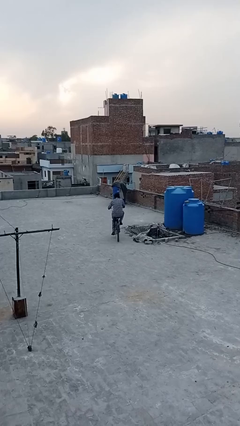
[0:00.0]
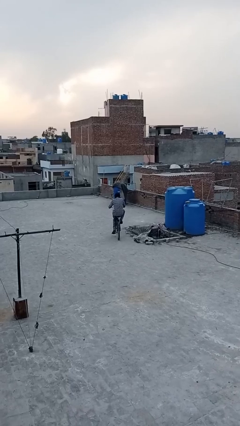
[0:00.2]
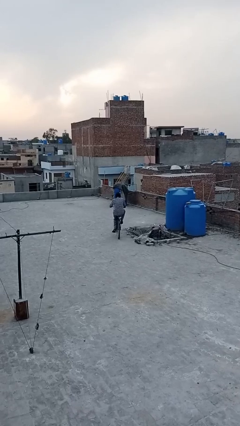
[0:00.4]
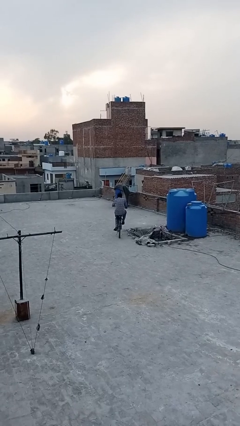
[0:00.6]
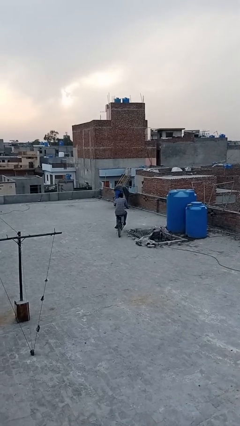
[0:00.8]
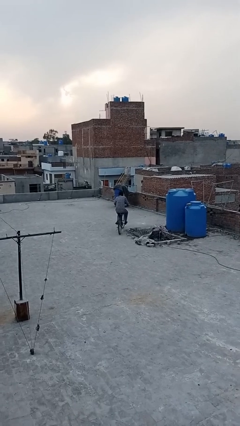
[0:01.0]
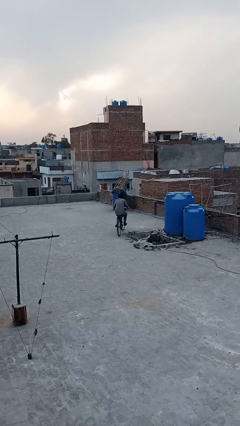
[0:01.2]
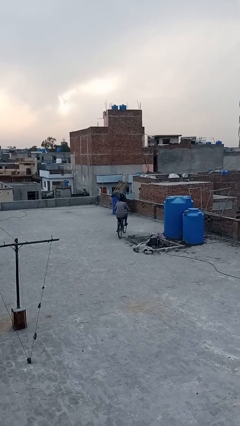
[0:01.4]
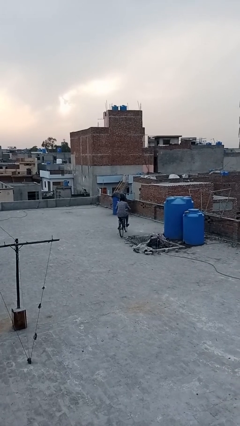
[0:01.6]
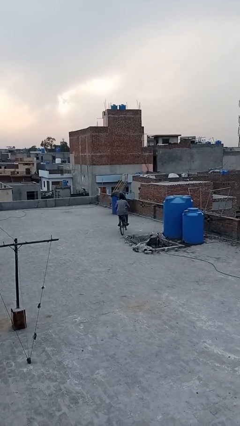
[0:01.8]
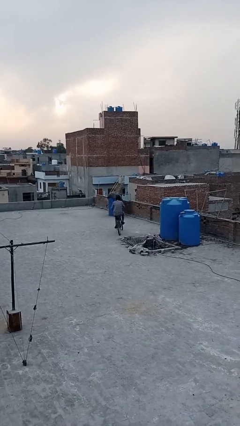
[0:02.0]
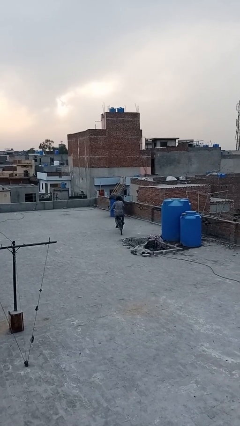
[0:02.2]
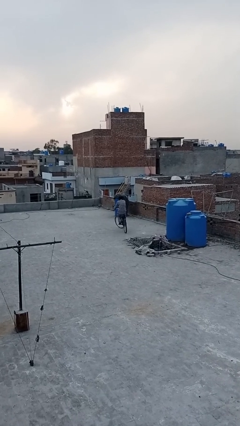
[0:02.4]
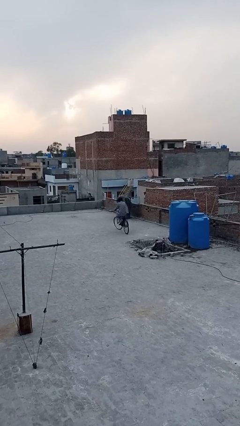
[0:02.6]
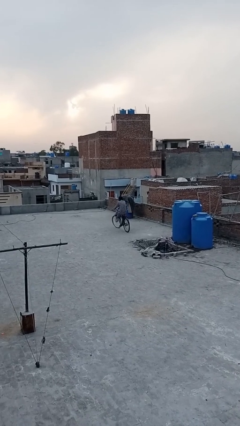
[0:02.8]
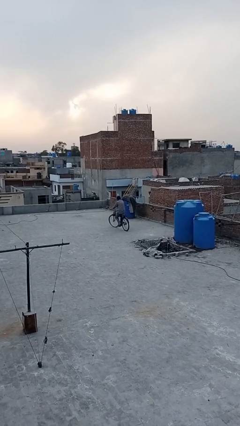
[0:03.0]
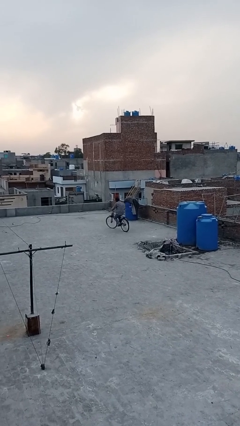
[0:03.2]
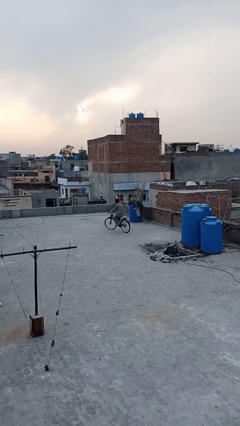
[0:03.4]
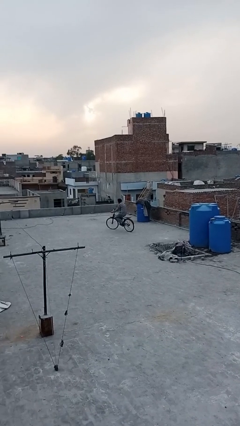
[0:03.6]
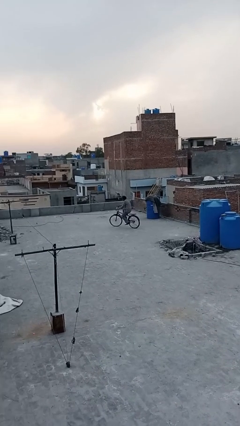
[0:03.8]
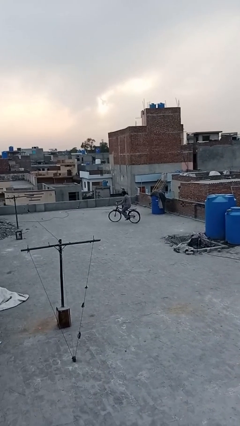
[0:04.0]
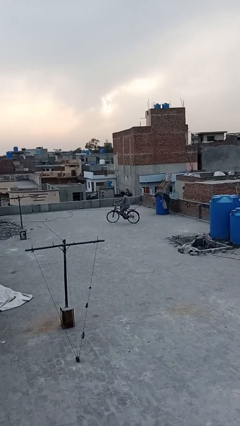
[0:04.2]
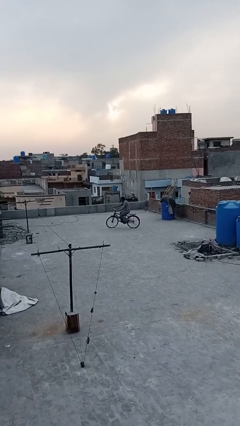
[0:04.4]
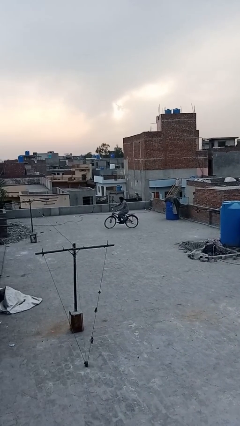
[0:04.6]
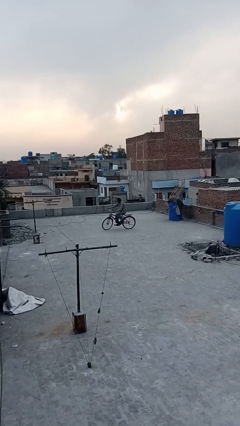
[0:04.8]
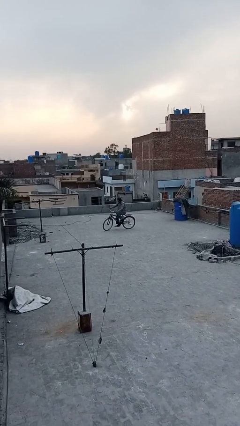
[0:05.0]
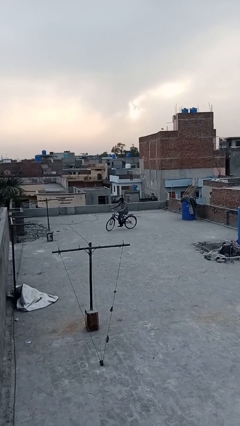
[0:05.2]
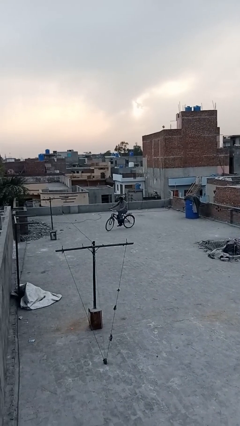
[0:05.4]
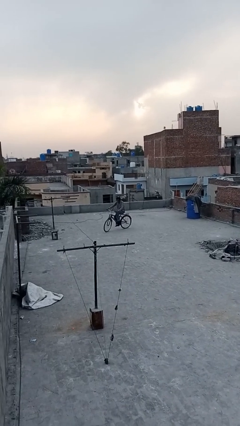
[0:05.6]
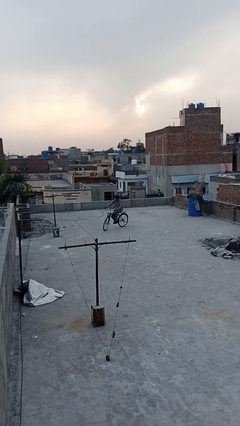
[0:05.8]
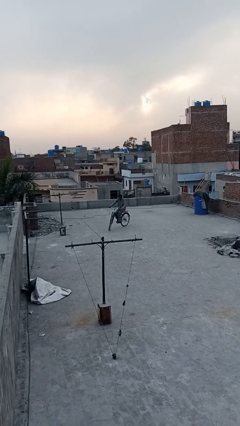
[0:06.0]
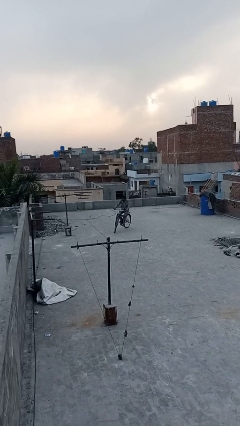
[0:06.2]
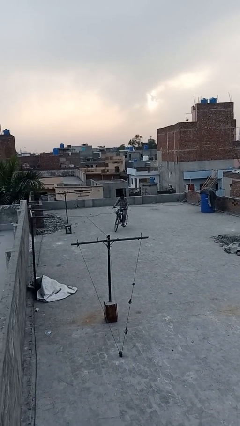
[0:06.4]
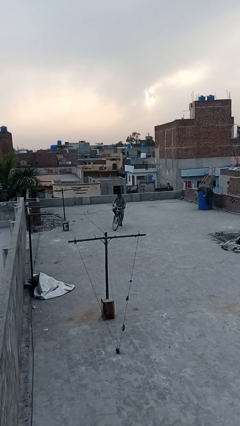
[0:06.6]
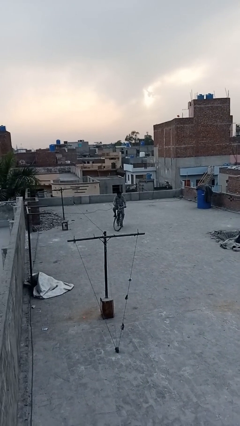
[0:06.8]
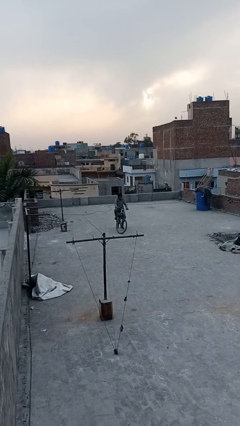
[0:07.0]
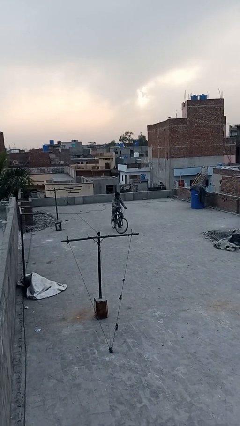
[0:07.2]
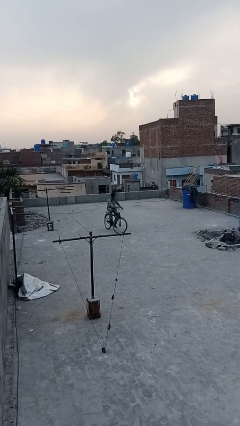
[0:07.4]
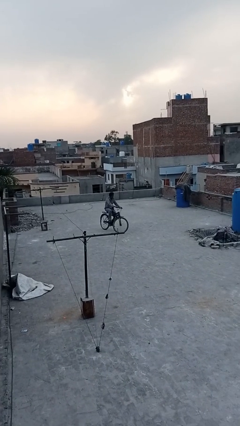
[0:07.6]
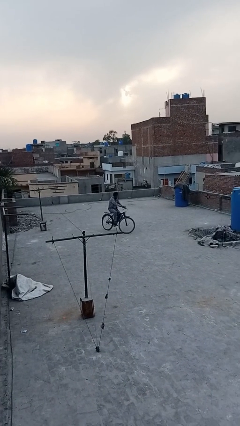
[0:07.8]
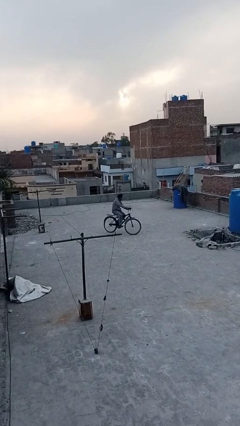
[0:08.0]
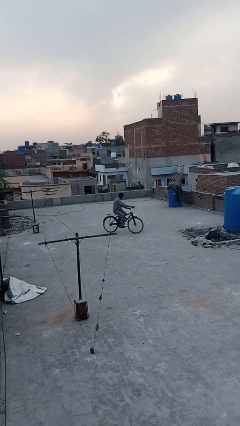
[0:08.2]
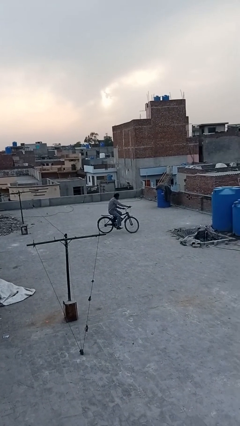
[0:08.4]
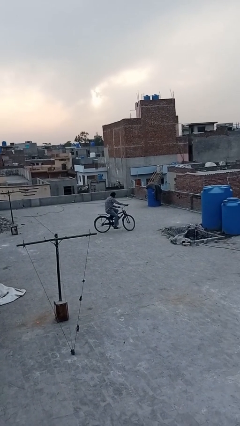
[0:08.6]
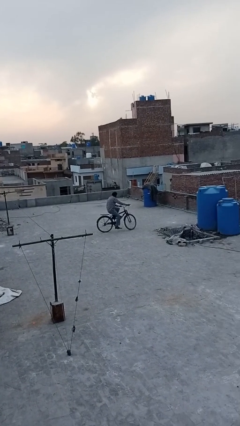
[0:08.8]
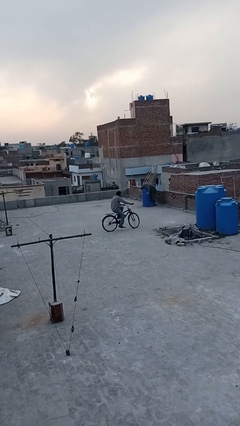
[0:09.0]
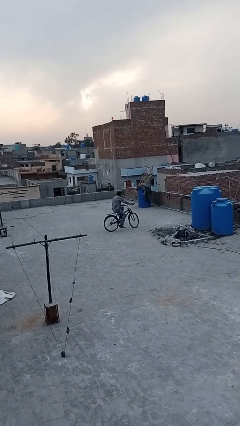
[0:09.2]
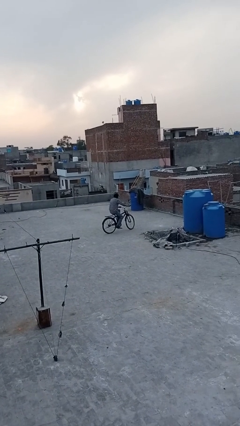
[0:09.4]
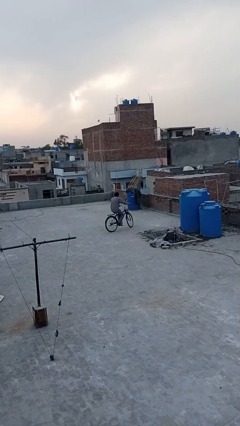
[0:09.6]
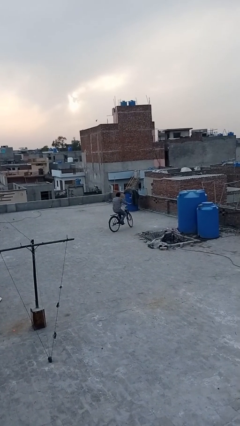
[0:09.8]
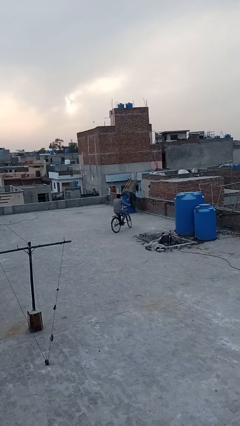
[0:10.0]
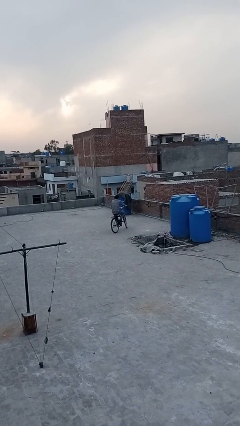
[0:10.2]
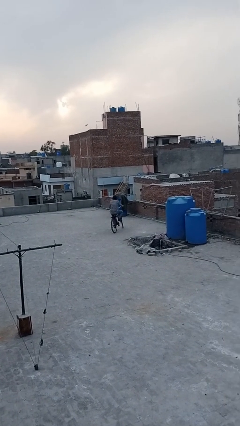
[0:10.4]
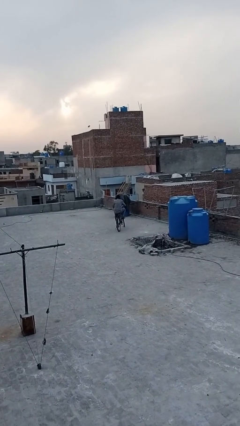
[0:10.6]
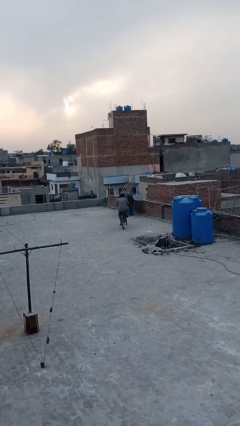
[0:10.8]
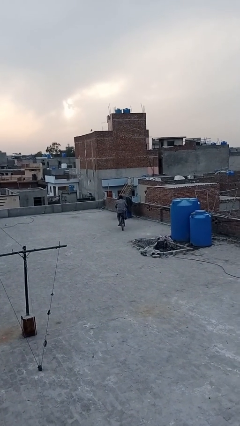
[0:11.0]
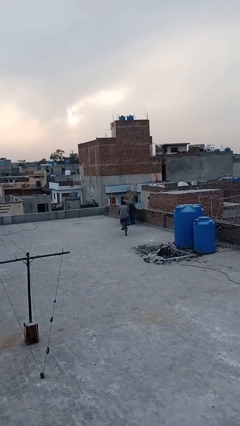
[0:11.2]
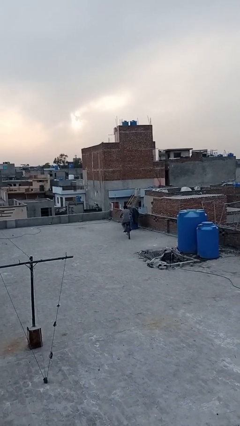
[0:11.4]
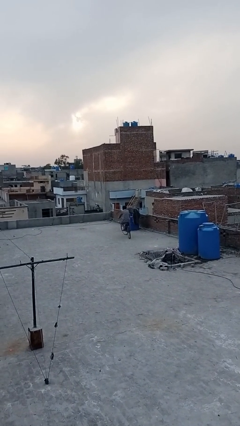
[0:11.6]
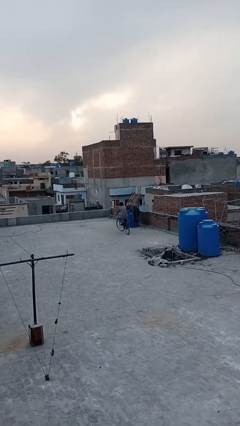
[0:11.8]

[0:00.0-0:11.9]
person rides bicycle

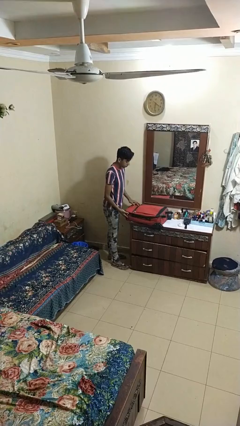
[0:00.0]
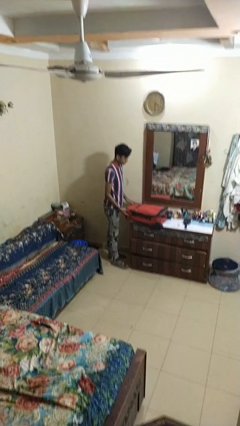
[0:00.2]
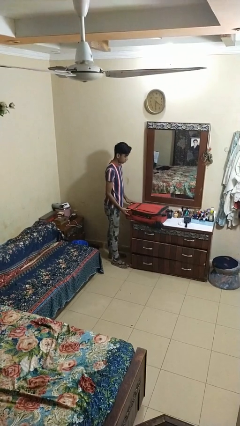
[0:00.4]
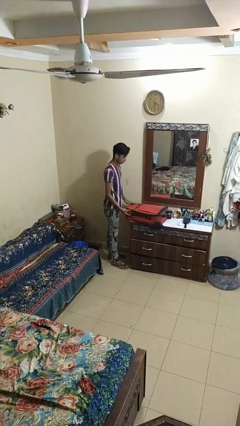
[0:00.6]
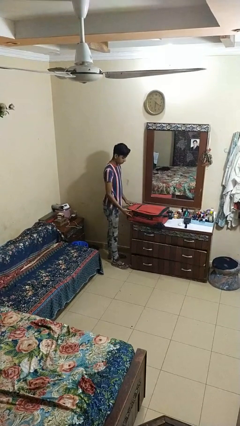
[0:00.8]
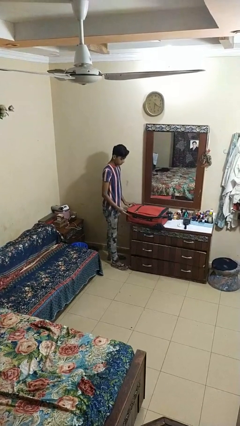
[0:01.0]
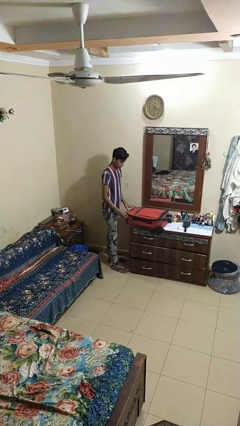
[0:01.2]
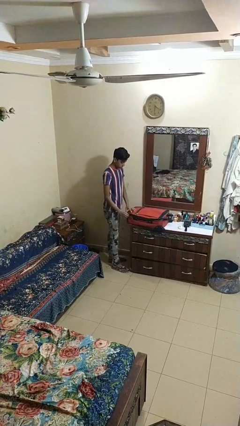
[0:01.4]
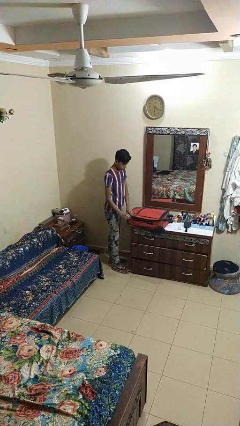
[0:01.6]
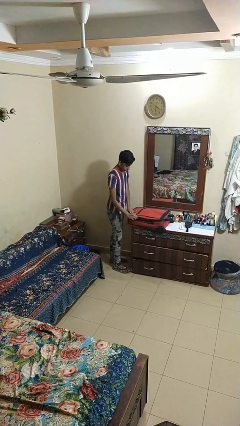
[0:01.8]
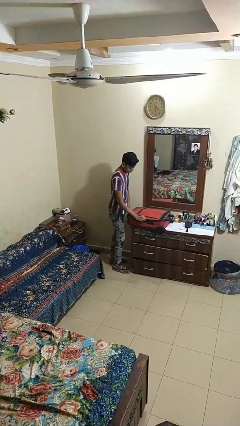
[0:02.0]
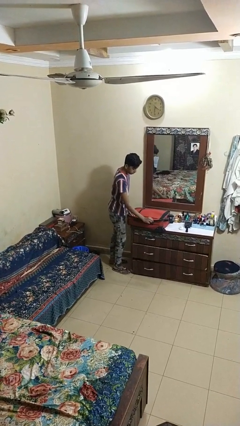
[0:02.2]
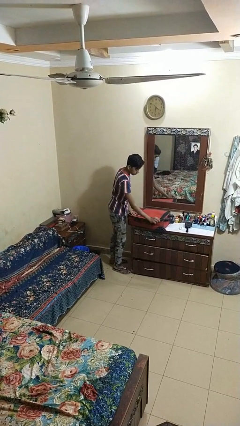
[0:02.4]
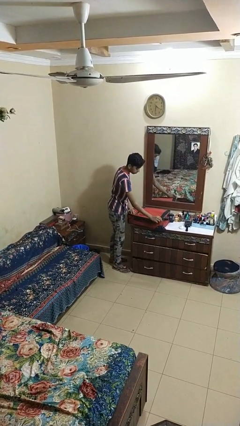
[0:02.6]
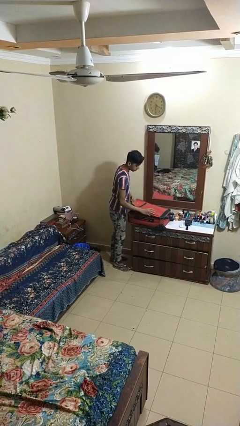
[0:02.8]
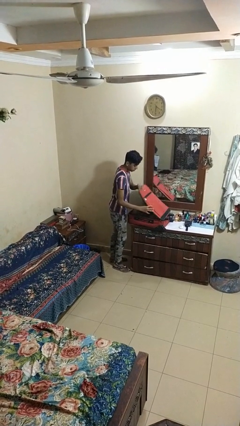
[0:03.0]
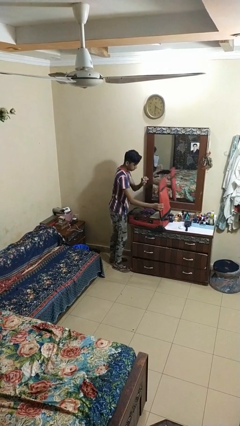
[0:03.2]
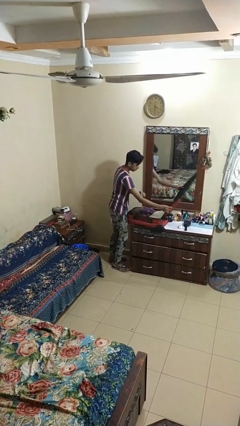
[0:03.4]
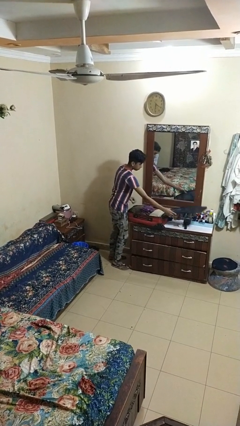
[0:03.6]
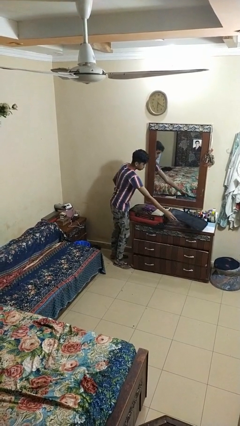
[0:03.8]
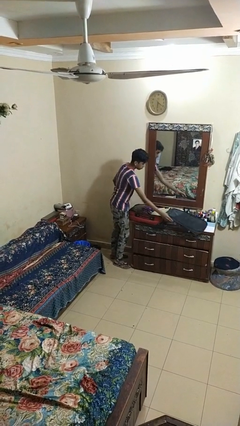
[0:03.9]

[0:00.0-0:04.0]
person opens suitcase

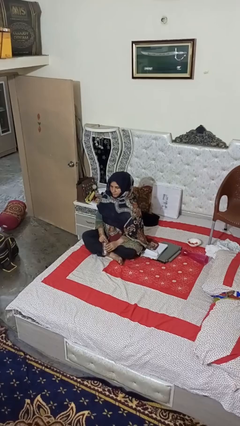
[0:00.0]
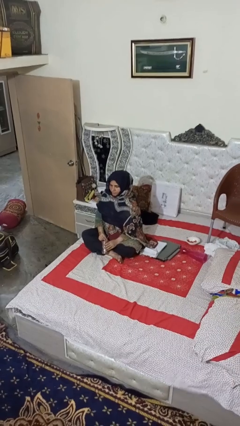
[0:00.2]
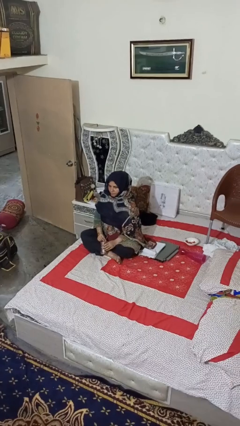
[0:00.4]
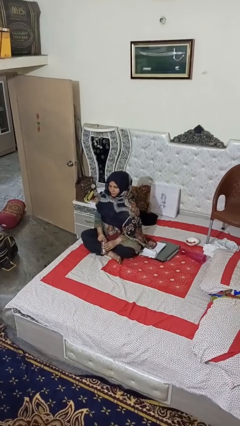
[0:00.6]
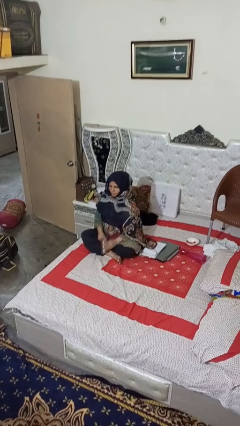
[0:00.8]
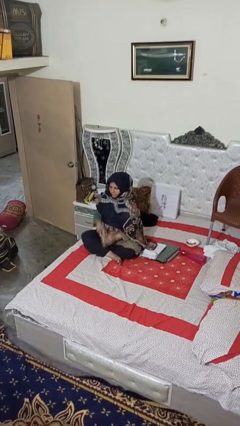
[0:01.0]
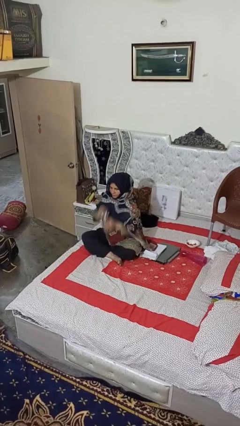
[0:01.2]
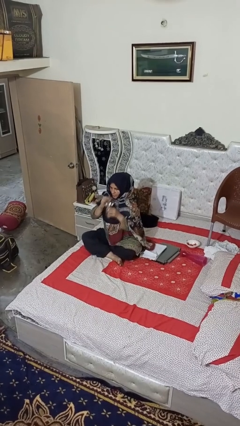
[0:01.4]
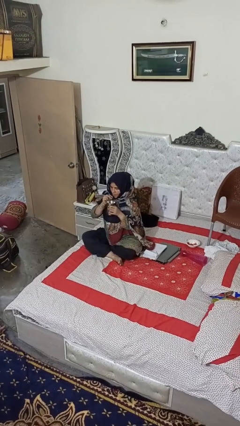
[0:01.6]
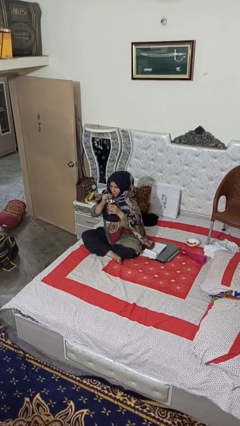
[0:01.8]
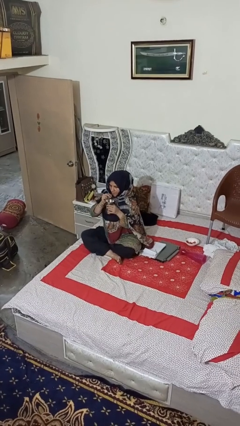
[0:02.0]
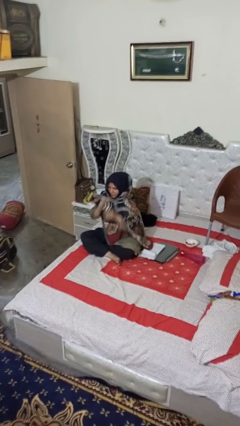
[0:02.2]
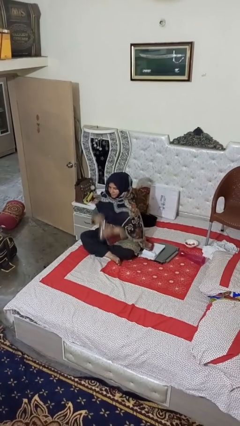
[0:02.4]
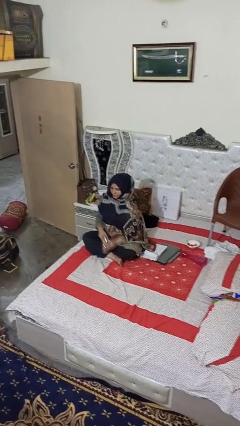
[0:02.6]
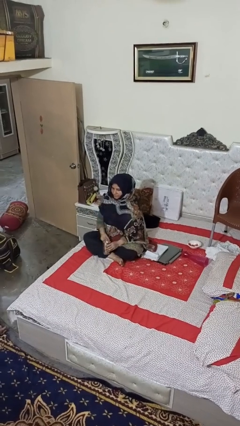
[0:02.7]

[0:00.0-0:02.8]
person drinks from straw
